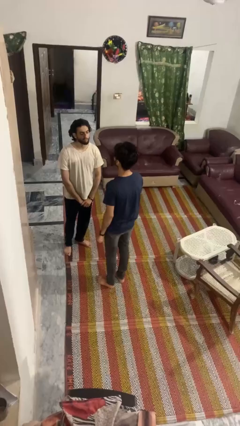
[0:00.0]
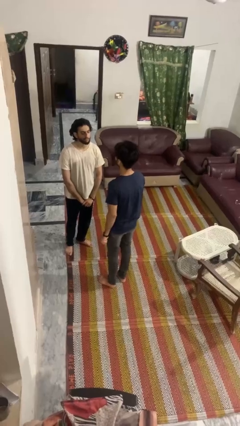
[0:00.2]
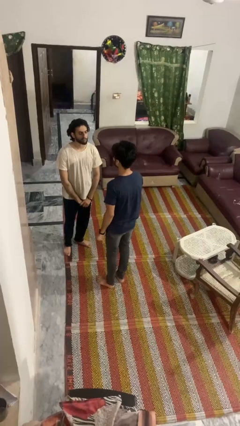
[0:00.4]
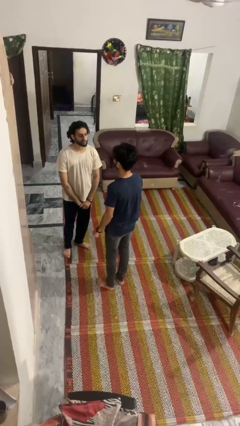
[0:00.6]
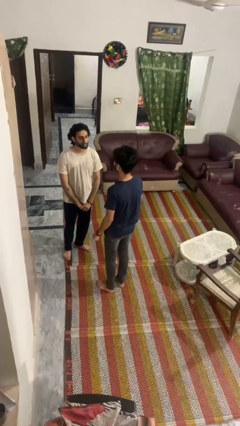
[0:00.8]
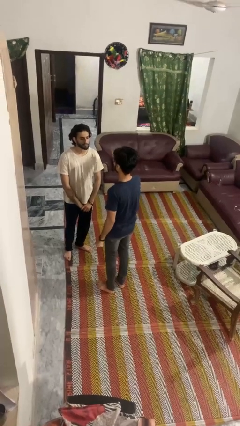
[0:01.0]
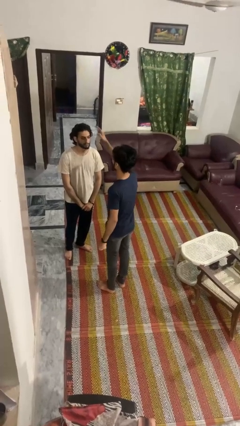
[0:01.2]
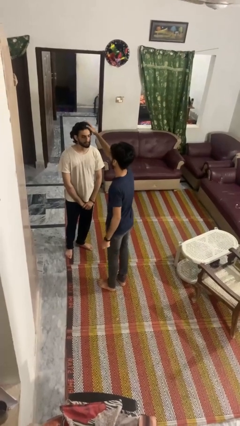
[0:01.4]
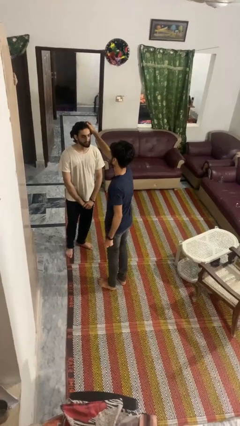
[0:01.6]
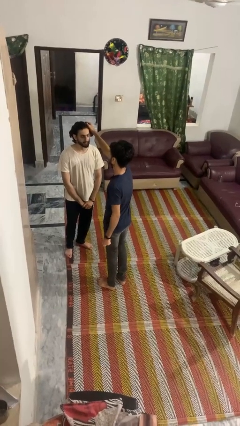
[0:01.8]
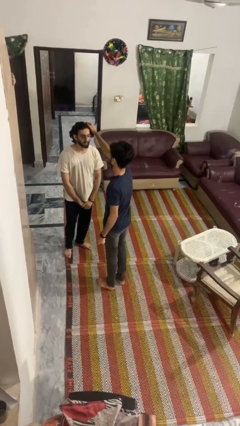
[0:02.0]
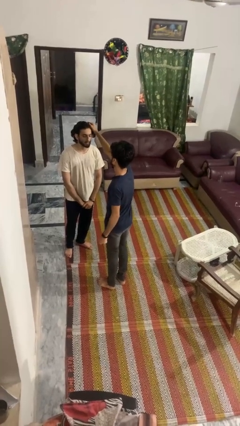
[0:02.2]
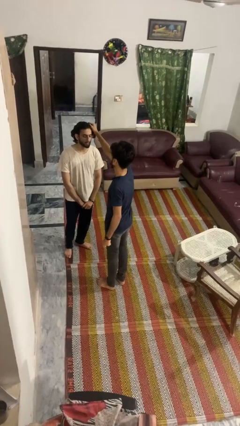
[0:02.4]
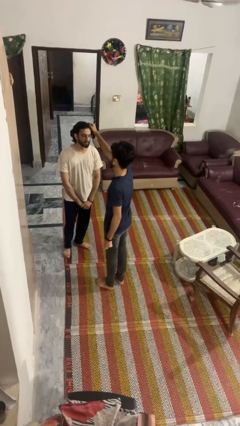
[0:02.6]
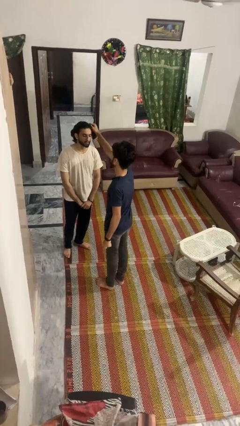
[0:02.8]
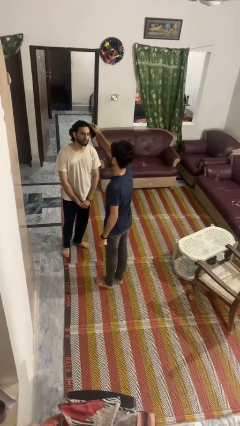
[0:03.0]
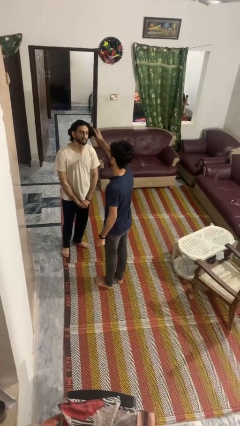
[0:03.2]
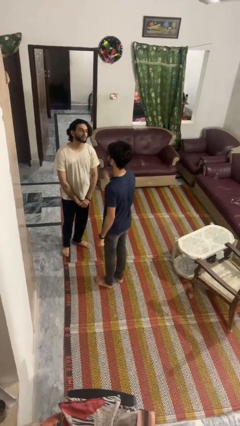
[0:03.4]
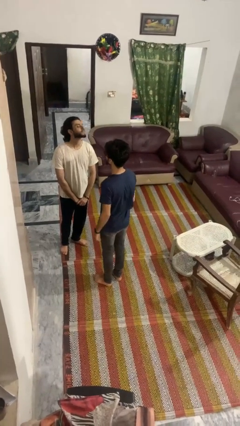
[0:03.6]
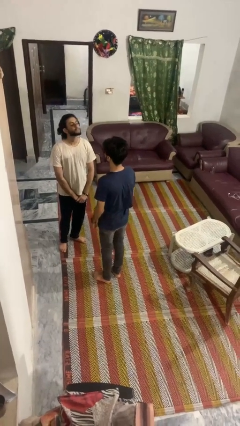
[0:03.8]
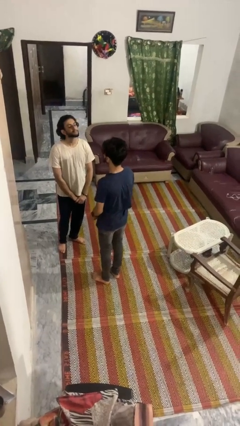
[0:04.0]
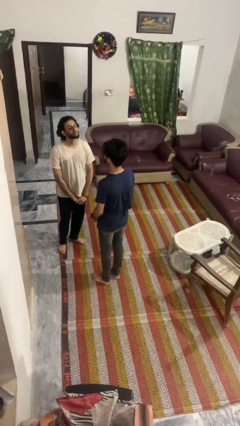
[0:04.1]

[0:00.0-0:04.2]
person grabs person by hair

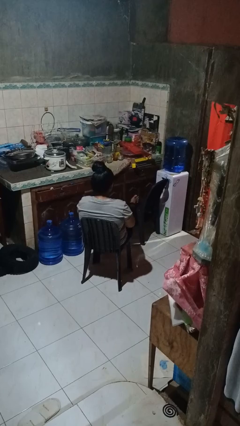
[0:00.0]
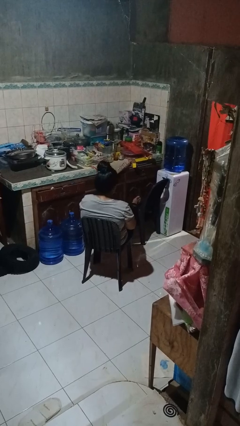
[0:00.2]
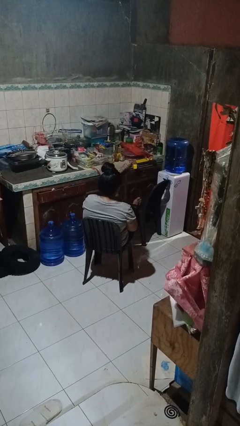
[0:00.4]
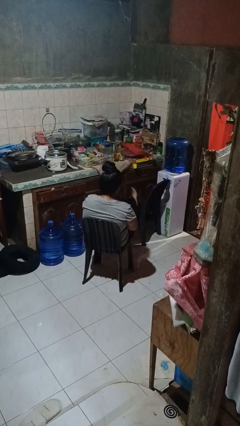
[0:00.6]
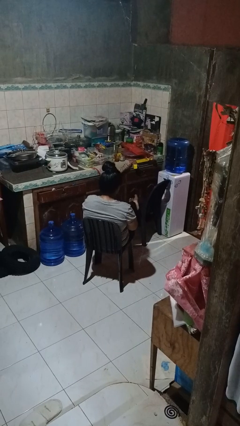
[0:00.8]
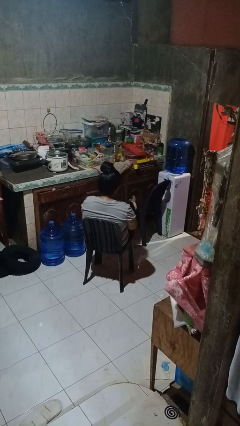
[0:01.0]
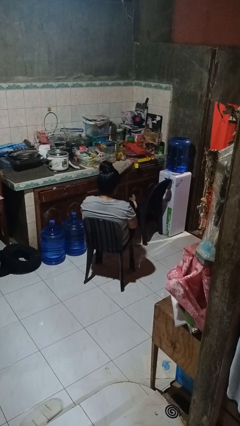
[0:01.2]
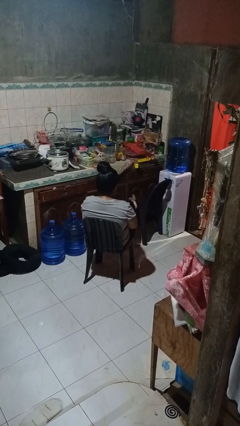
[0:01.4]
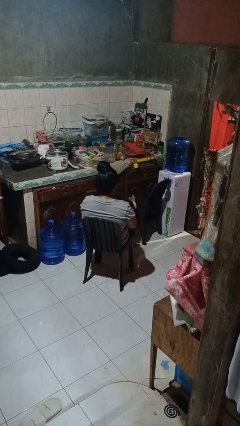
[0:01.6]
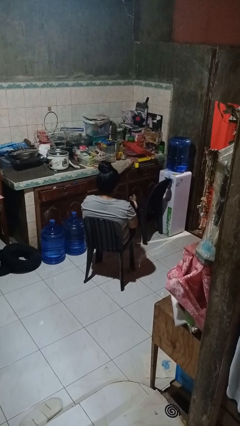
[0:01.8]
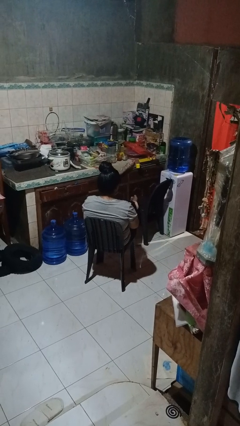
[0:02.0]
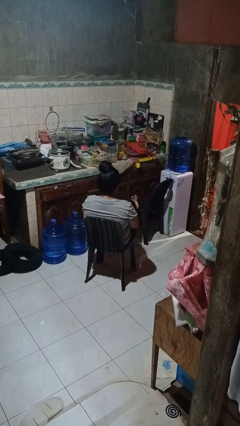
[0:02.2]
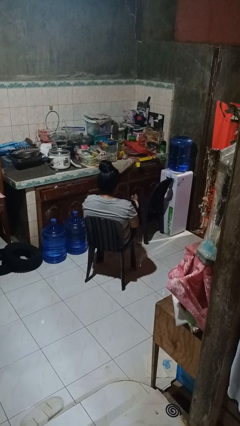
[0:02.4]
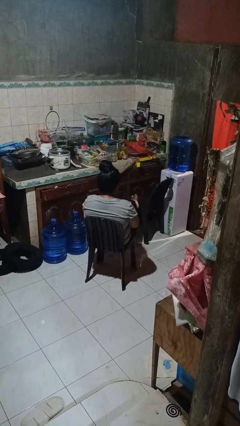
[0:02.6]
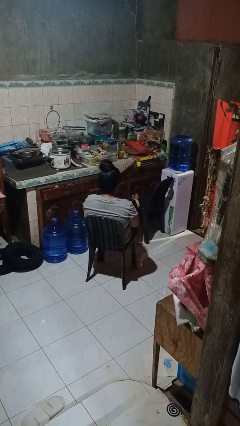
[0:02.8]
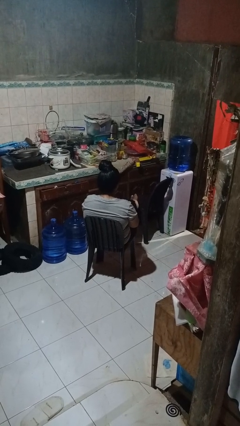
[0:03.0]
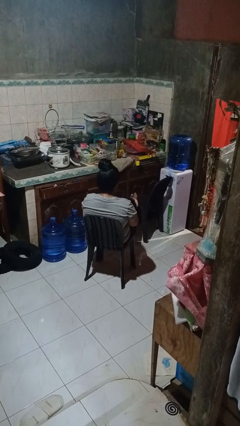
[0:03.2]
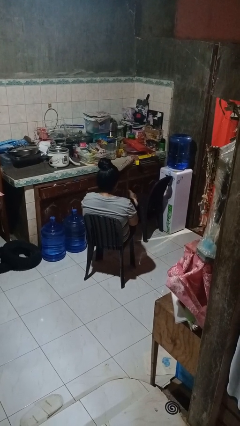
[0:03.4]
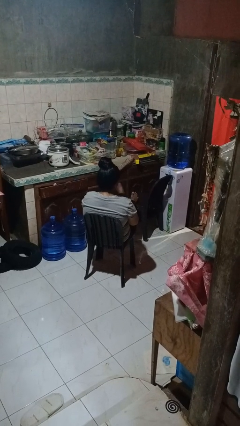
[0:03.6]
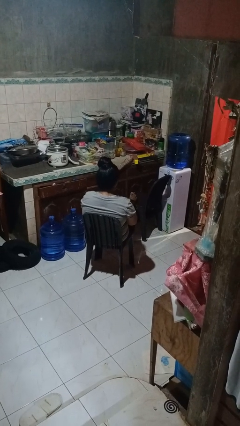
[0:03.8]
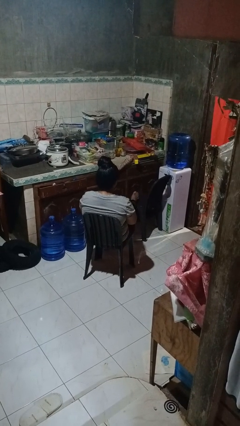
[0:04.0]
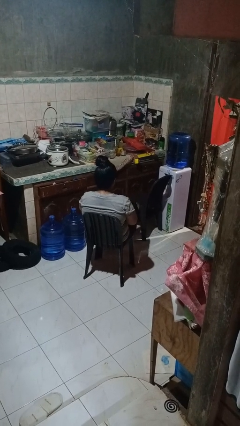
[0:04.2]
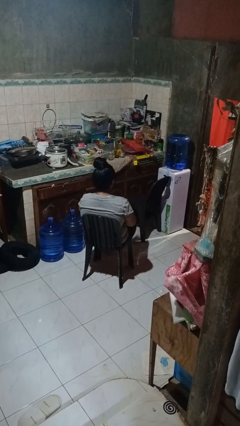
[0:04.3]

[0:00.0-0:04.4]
person puts feet up

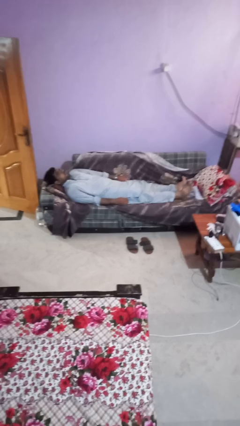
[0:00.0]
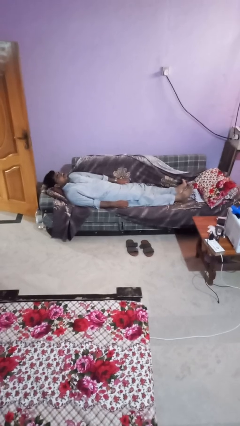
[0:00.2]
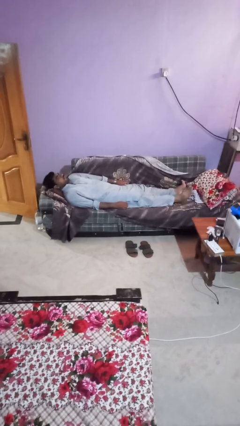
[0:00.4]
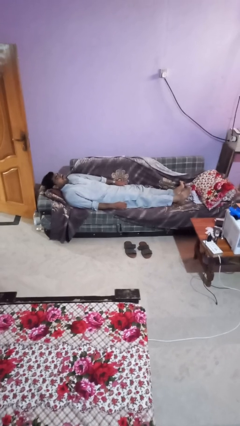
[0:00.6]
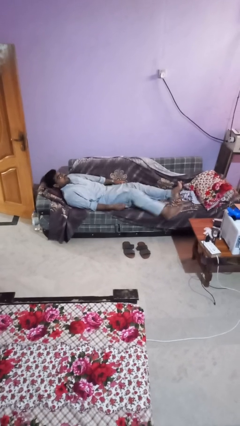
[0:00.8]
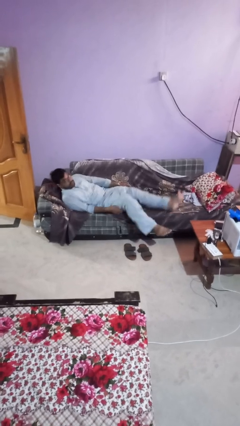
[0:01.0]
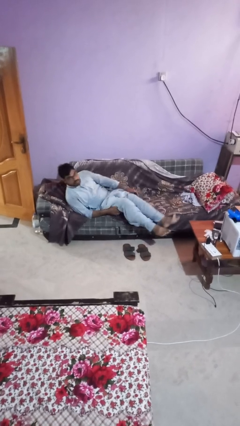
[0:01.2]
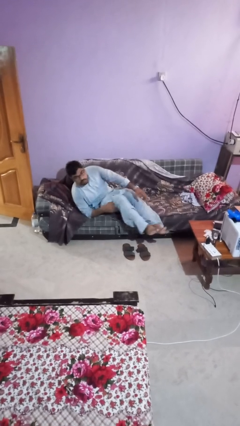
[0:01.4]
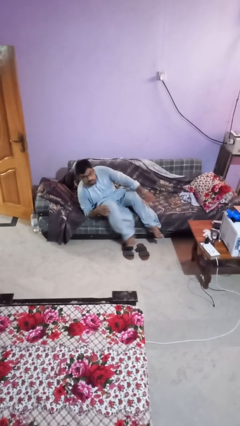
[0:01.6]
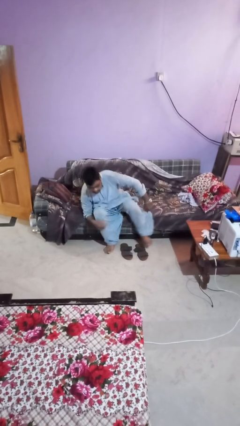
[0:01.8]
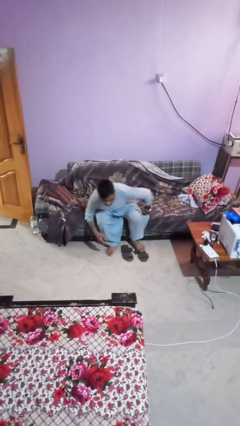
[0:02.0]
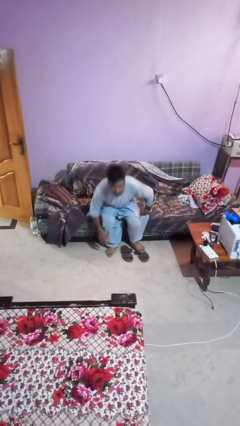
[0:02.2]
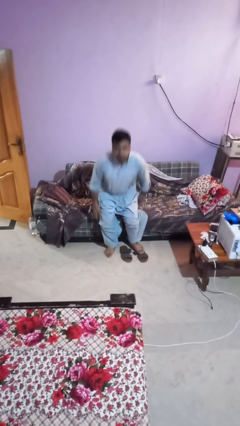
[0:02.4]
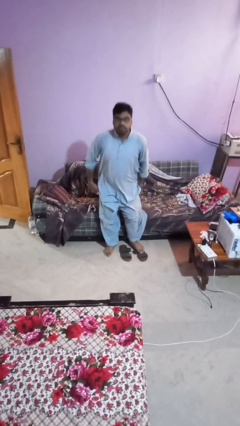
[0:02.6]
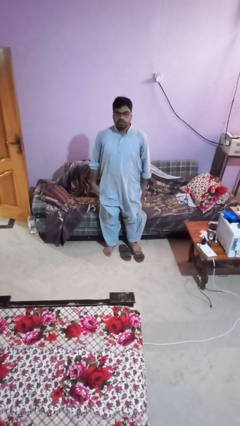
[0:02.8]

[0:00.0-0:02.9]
person stands up

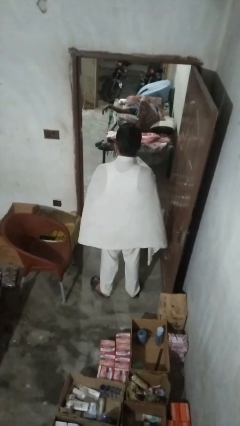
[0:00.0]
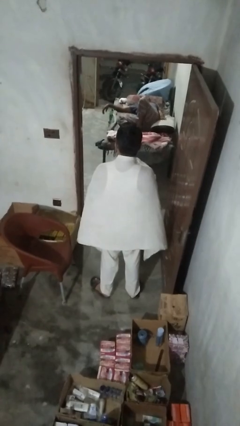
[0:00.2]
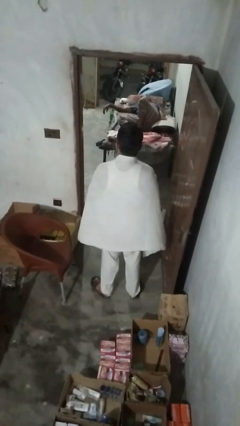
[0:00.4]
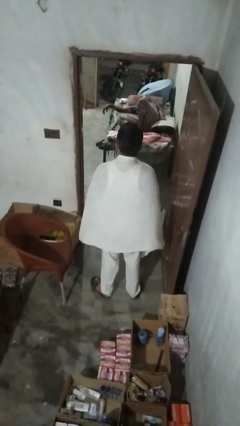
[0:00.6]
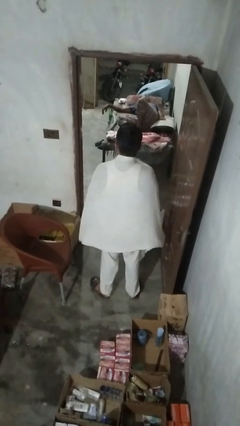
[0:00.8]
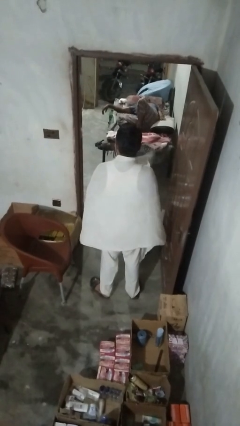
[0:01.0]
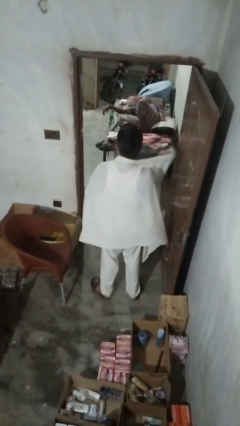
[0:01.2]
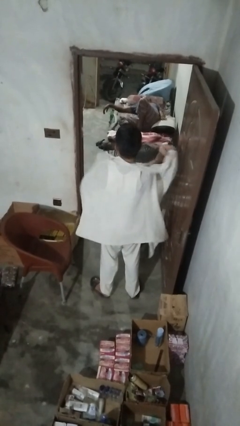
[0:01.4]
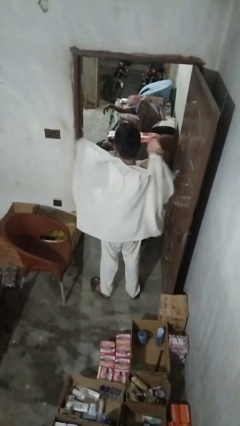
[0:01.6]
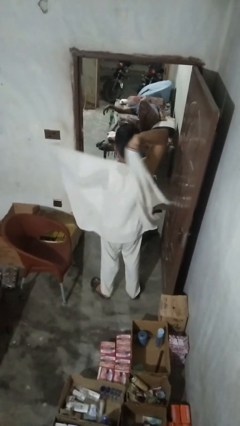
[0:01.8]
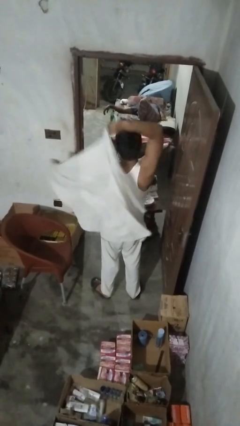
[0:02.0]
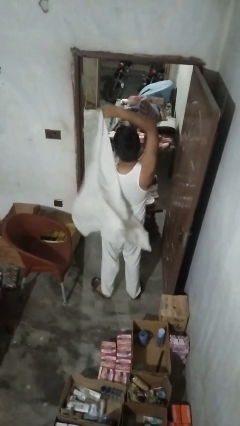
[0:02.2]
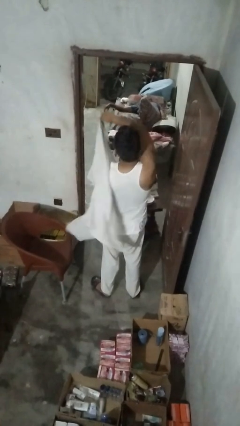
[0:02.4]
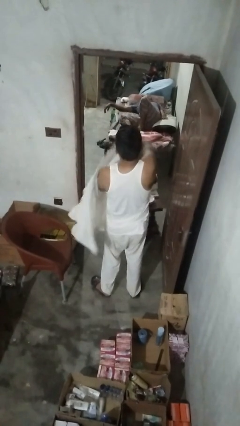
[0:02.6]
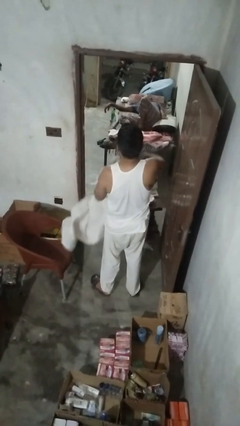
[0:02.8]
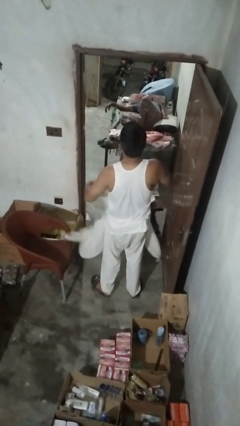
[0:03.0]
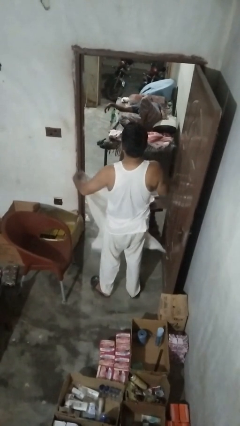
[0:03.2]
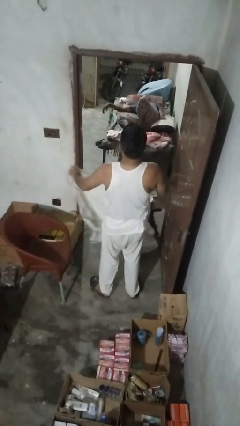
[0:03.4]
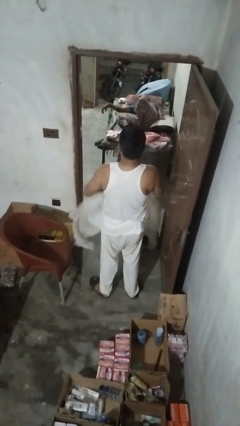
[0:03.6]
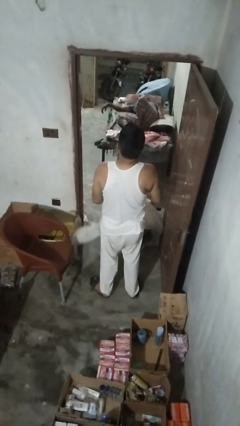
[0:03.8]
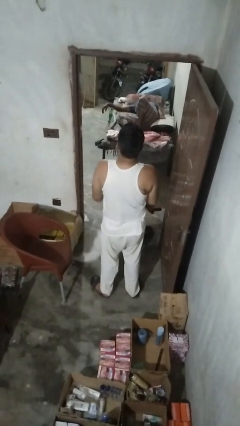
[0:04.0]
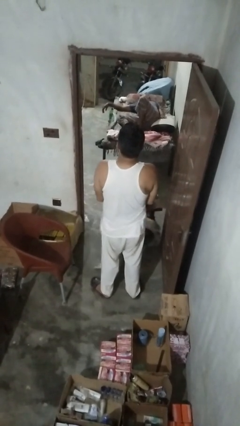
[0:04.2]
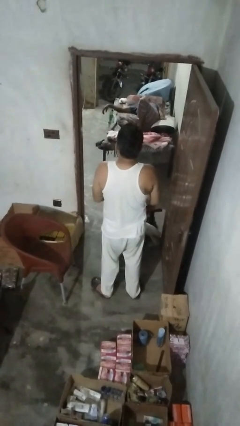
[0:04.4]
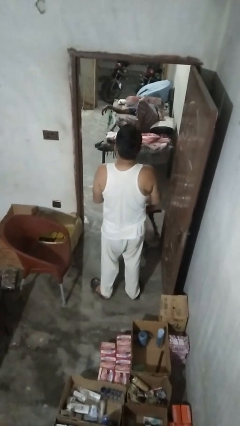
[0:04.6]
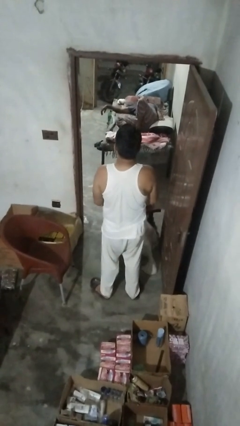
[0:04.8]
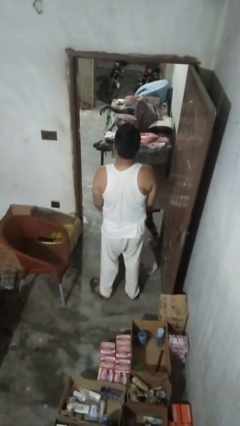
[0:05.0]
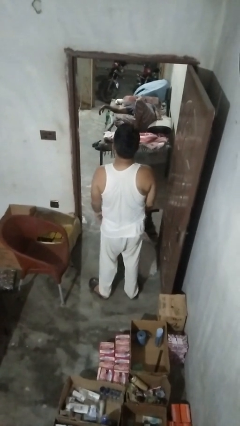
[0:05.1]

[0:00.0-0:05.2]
person unfolds blanket

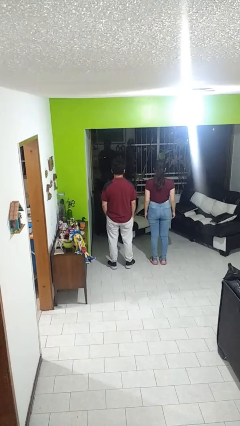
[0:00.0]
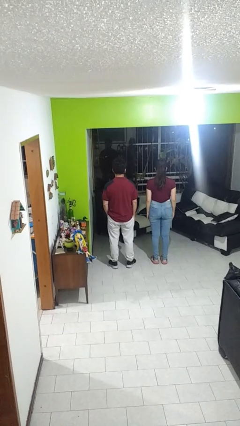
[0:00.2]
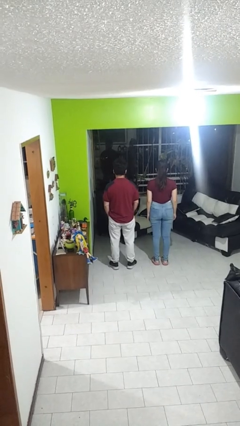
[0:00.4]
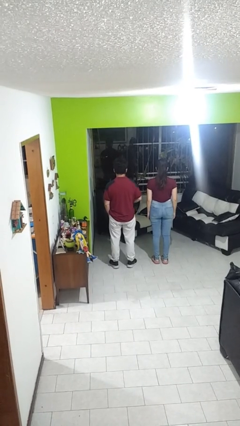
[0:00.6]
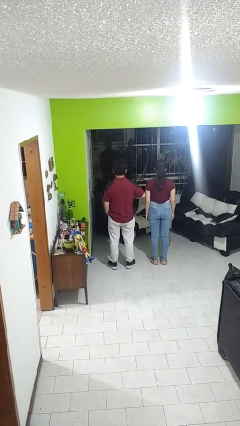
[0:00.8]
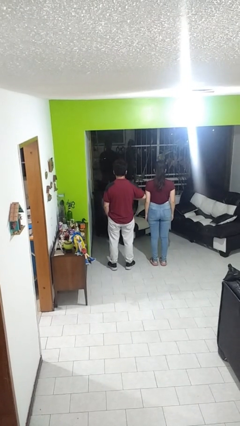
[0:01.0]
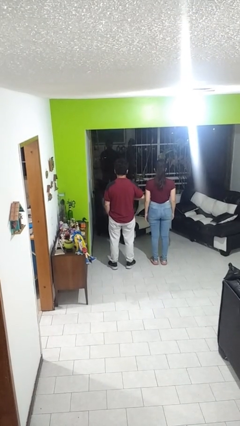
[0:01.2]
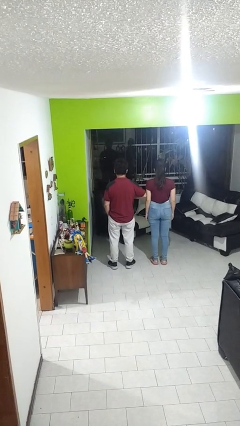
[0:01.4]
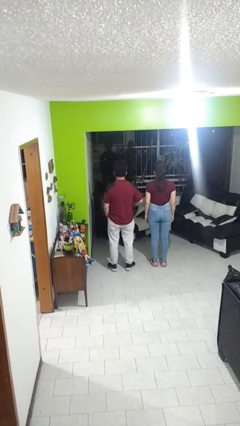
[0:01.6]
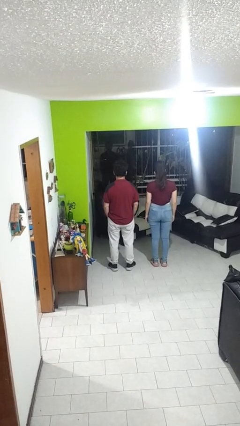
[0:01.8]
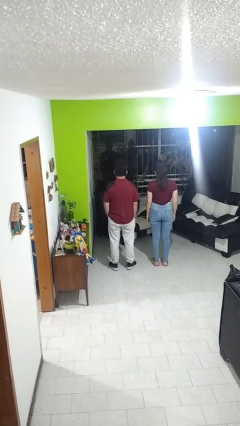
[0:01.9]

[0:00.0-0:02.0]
person nudges person with elbow
